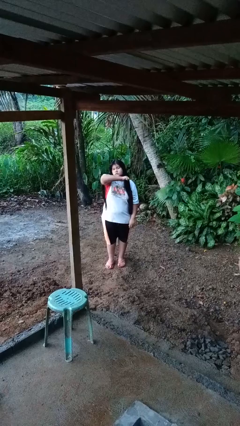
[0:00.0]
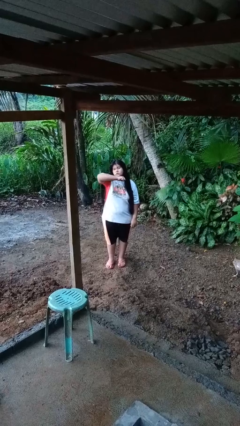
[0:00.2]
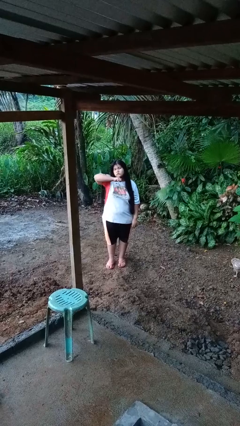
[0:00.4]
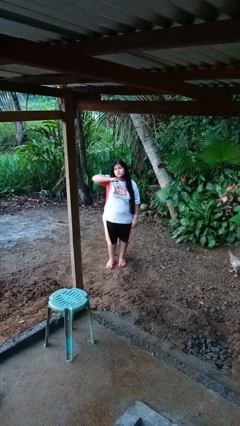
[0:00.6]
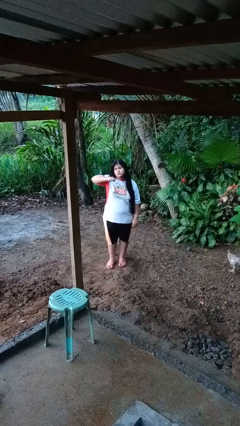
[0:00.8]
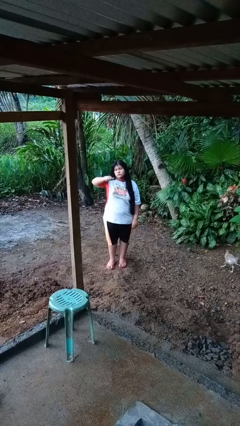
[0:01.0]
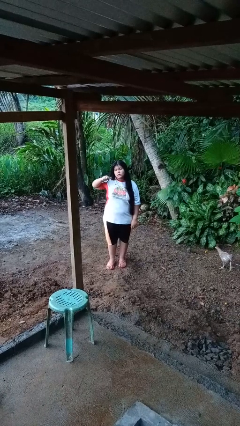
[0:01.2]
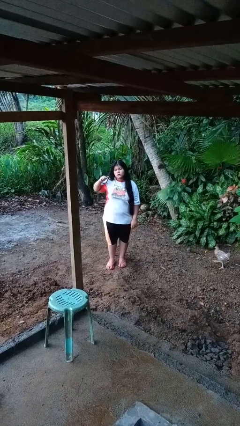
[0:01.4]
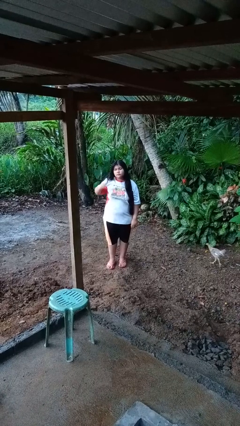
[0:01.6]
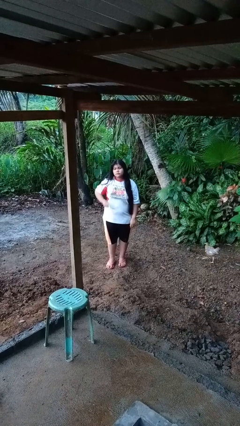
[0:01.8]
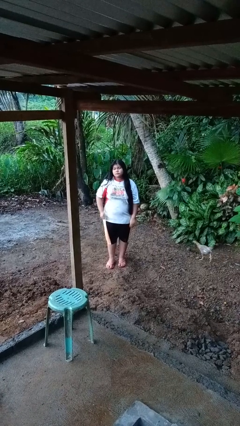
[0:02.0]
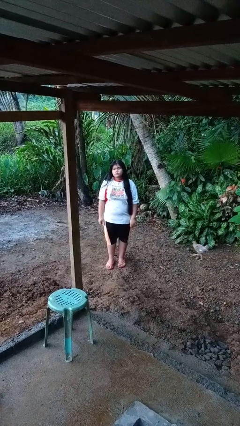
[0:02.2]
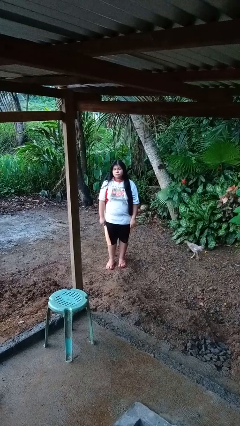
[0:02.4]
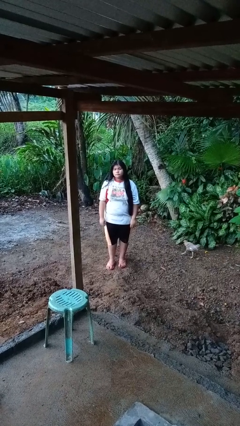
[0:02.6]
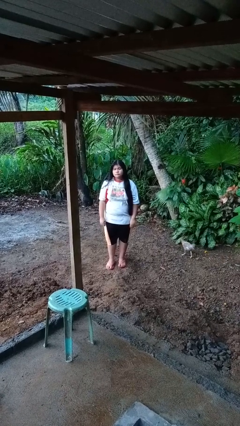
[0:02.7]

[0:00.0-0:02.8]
person gestures cut

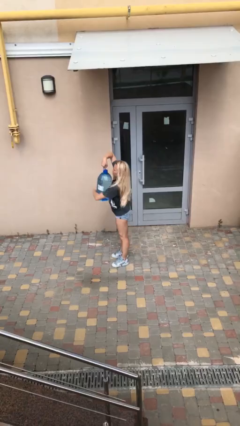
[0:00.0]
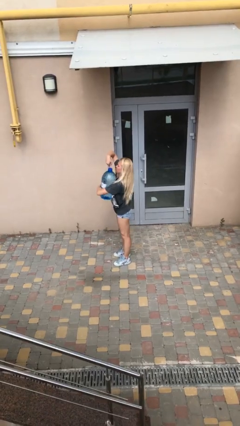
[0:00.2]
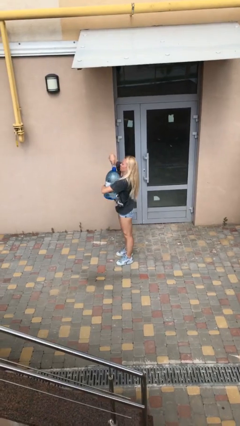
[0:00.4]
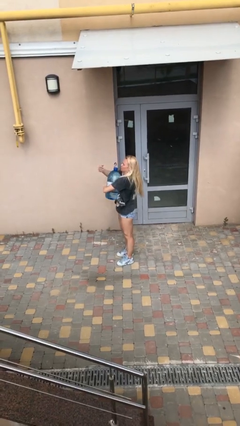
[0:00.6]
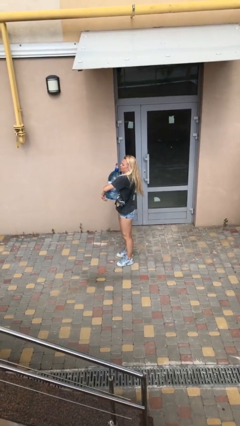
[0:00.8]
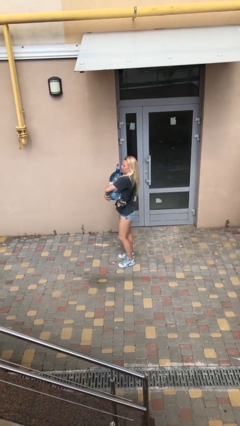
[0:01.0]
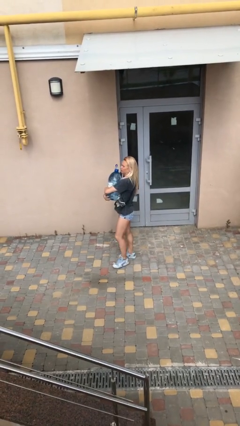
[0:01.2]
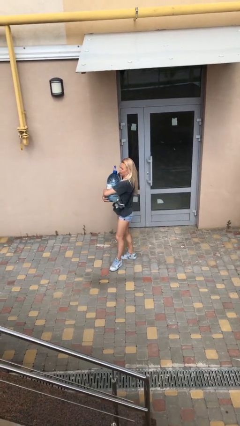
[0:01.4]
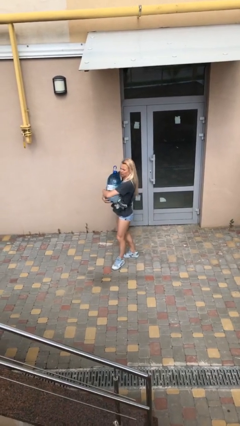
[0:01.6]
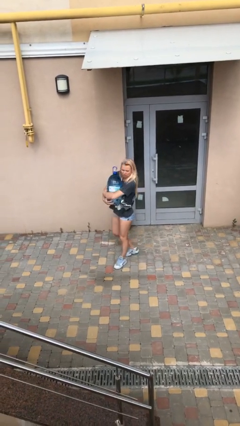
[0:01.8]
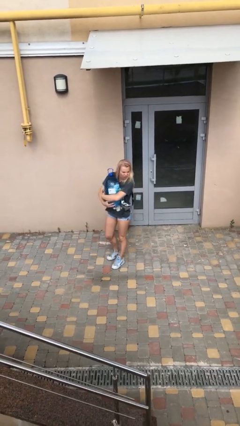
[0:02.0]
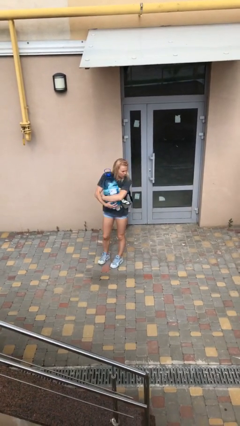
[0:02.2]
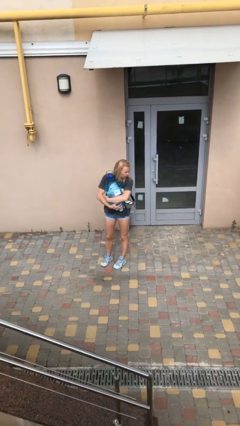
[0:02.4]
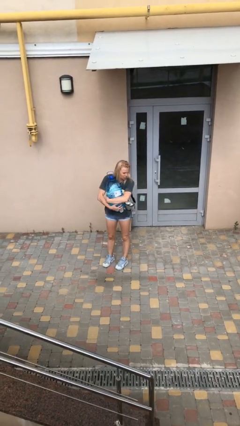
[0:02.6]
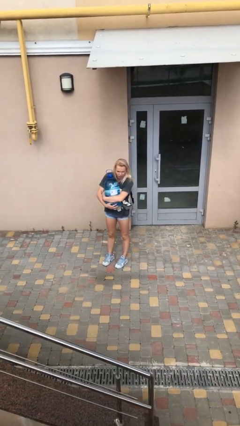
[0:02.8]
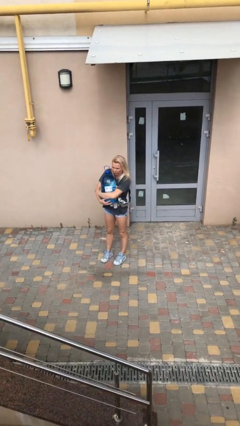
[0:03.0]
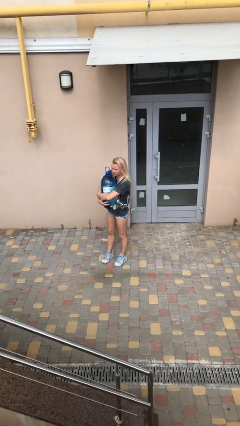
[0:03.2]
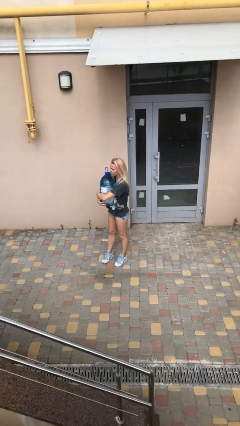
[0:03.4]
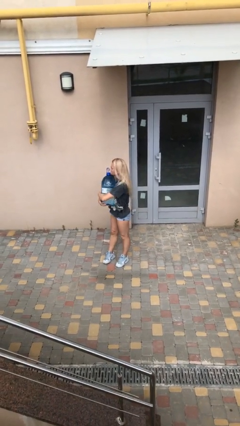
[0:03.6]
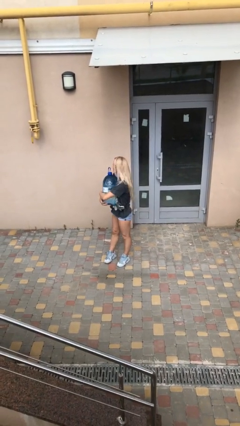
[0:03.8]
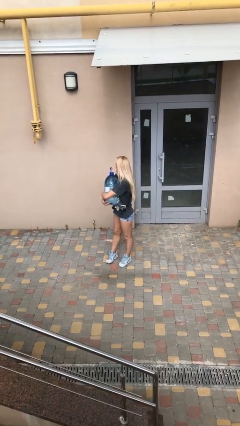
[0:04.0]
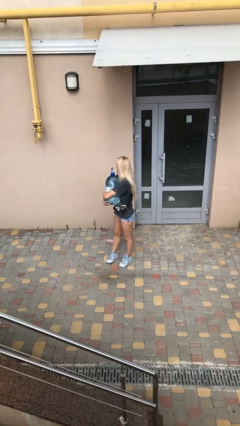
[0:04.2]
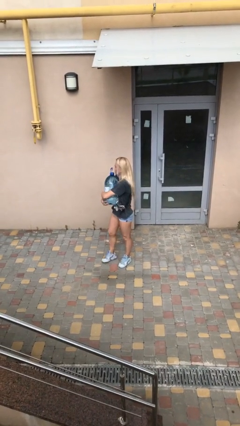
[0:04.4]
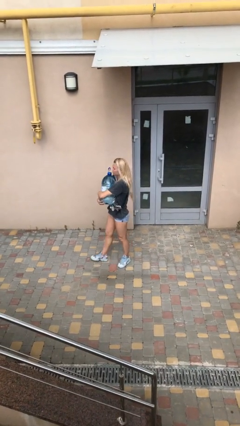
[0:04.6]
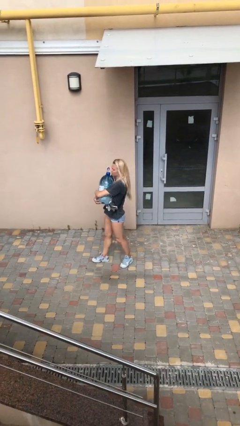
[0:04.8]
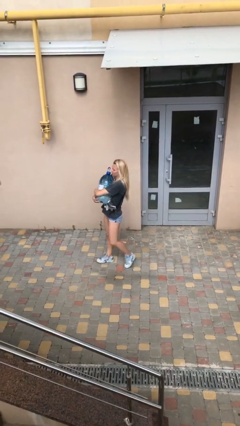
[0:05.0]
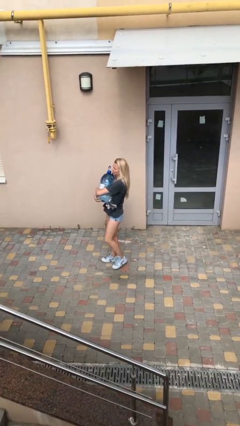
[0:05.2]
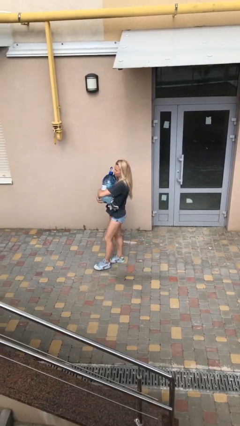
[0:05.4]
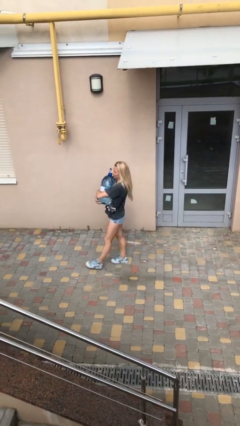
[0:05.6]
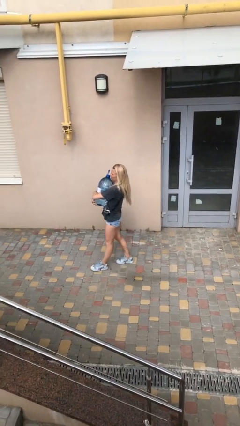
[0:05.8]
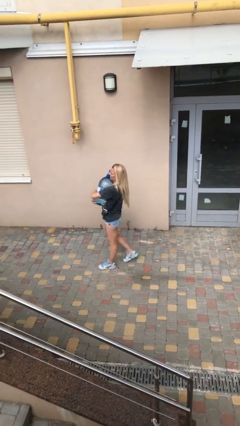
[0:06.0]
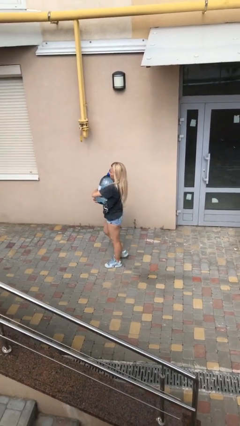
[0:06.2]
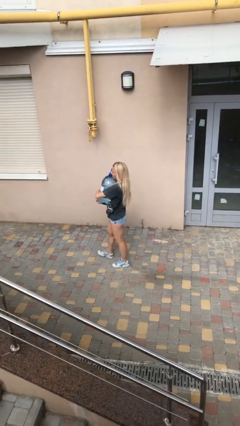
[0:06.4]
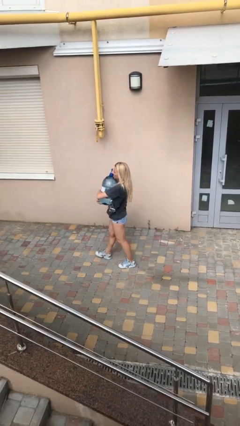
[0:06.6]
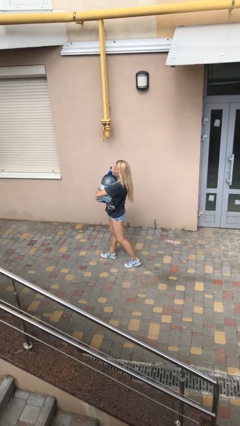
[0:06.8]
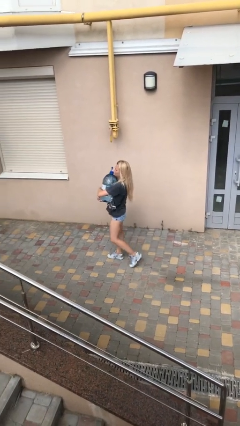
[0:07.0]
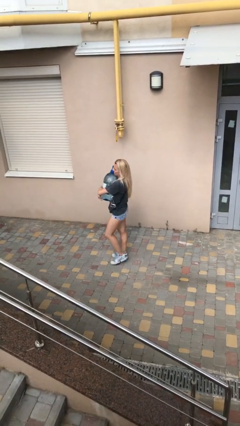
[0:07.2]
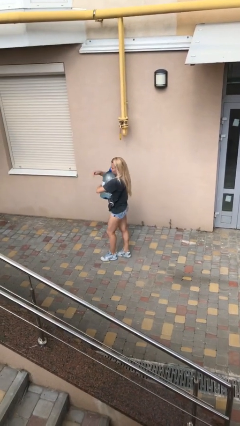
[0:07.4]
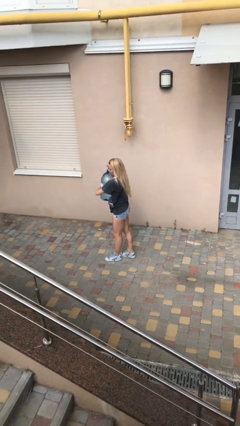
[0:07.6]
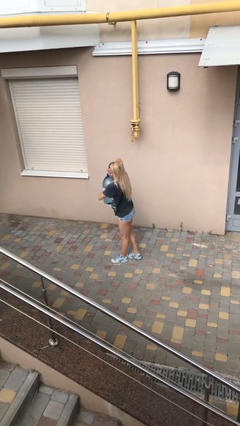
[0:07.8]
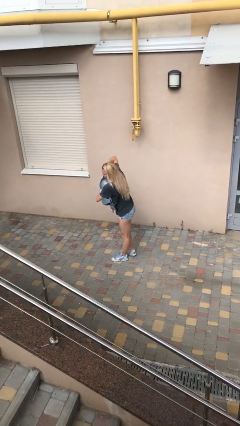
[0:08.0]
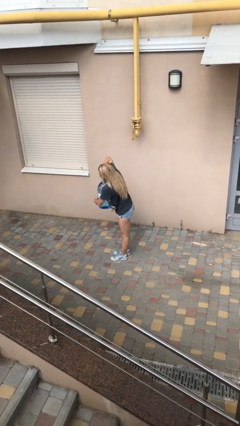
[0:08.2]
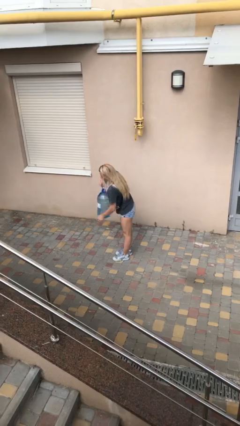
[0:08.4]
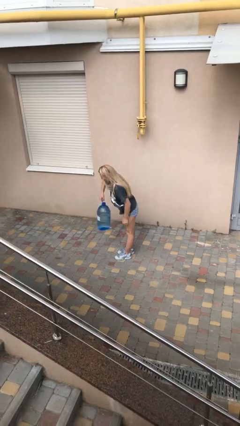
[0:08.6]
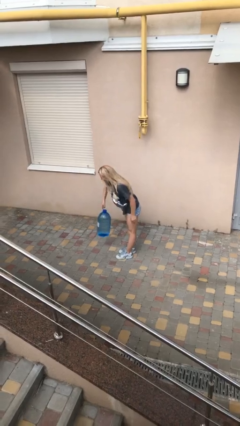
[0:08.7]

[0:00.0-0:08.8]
person carries heavy object

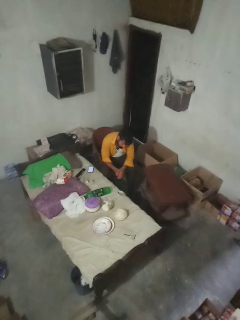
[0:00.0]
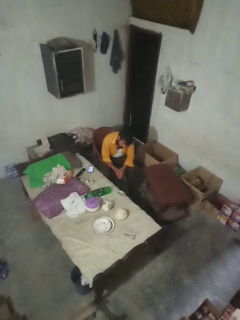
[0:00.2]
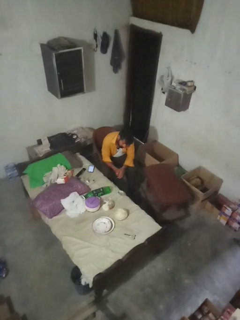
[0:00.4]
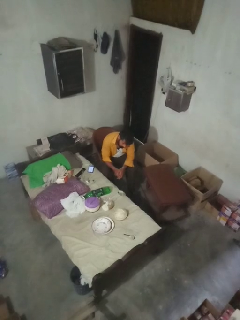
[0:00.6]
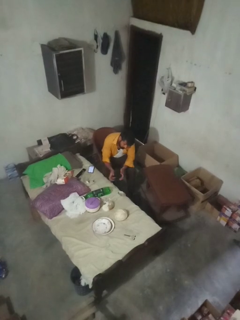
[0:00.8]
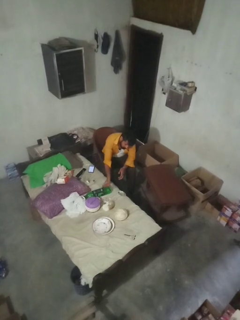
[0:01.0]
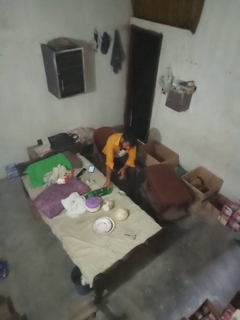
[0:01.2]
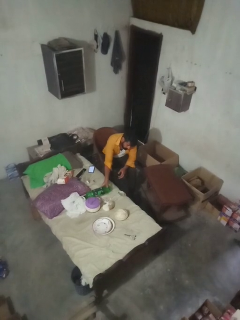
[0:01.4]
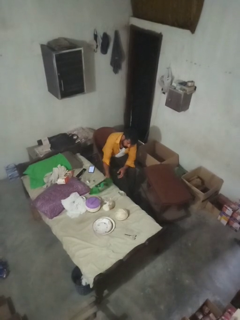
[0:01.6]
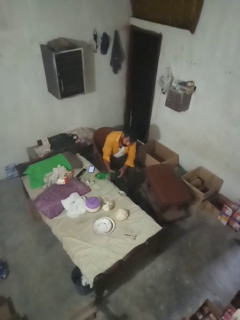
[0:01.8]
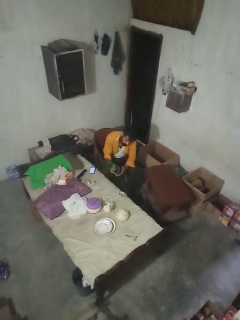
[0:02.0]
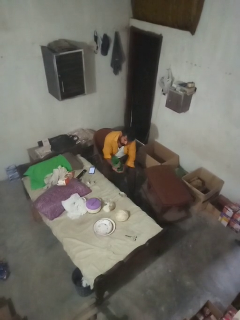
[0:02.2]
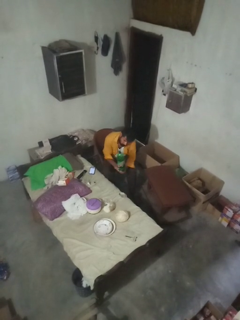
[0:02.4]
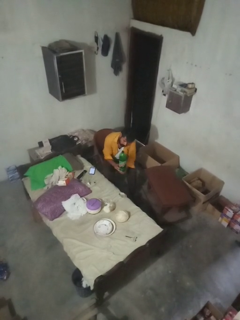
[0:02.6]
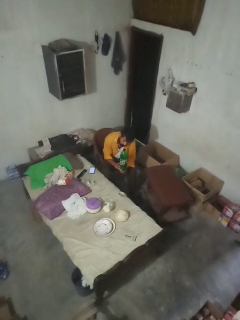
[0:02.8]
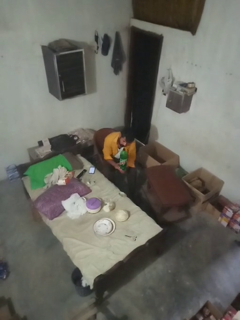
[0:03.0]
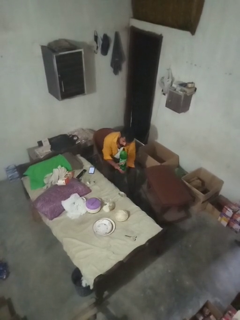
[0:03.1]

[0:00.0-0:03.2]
person picks up object from bed

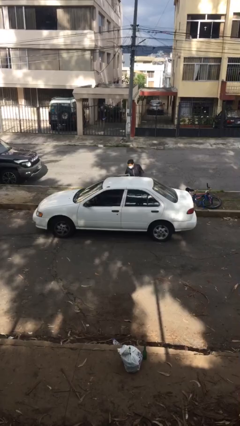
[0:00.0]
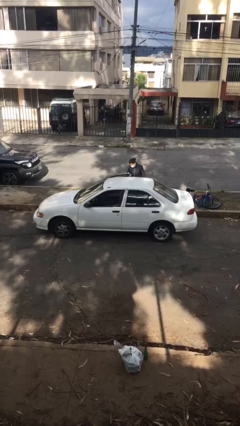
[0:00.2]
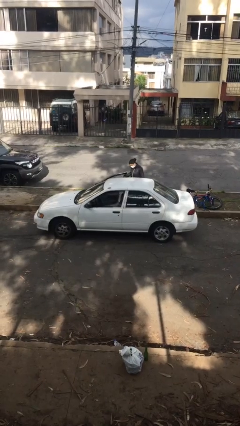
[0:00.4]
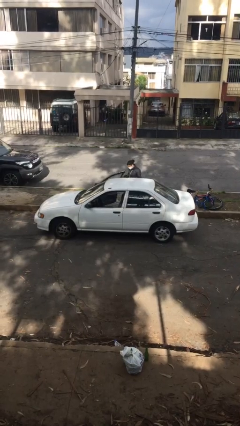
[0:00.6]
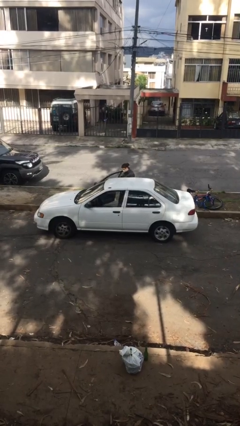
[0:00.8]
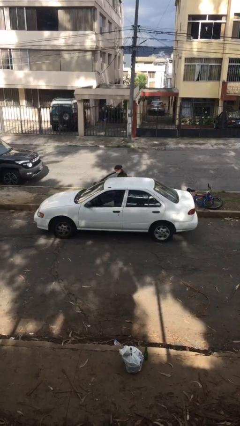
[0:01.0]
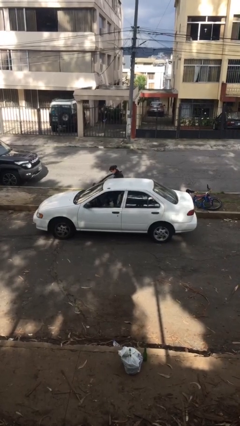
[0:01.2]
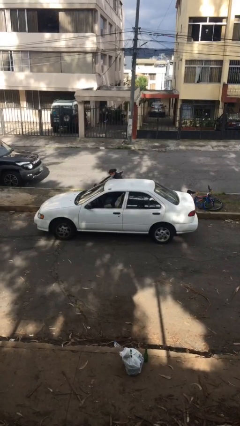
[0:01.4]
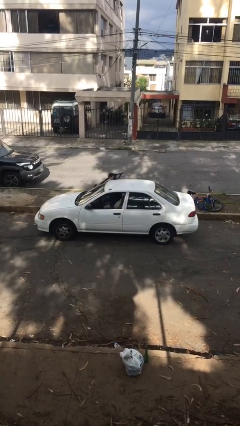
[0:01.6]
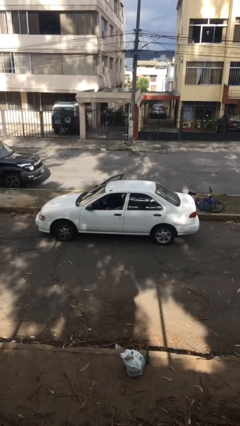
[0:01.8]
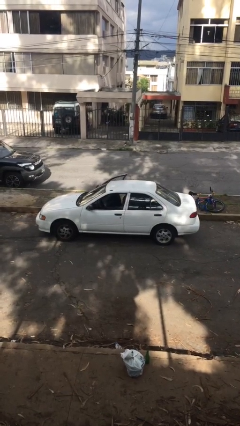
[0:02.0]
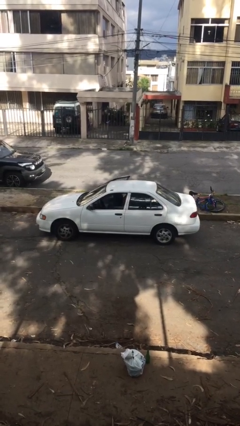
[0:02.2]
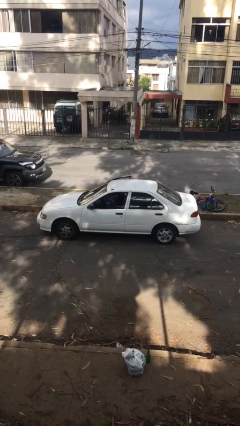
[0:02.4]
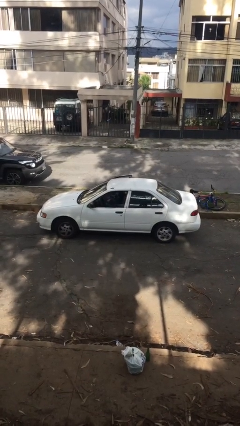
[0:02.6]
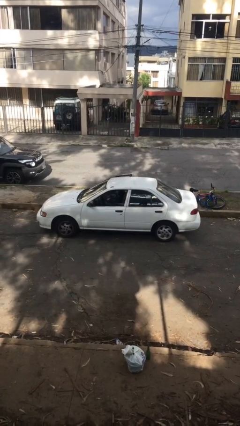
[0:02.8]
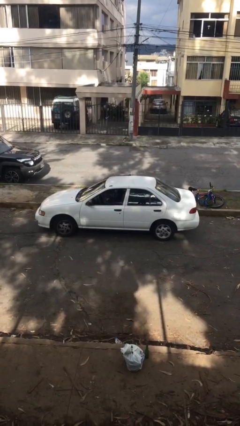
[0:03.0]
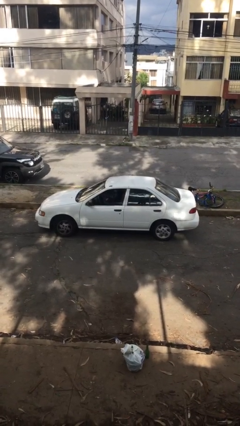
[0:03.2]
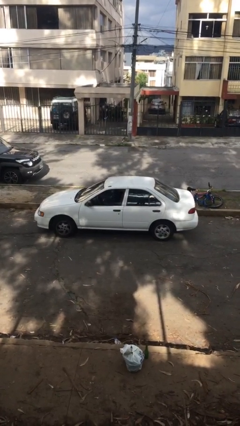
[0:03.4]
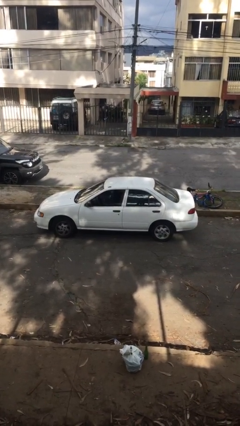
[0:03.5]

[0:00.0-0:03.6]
car picks up person

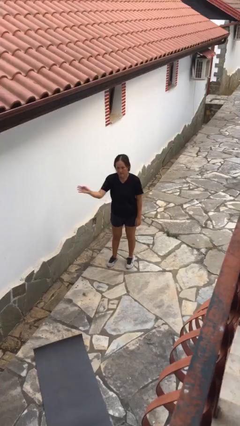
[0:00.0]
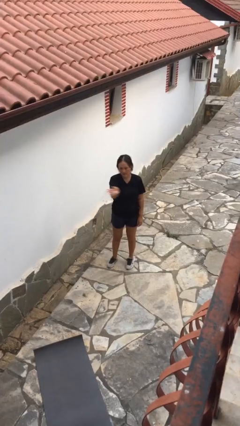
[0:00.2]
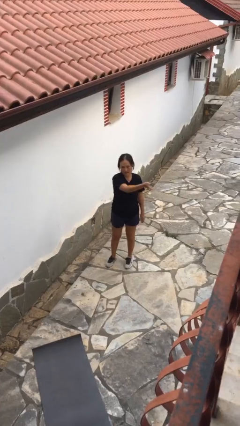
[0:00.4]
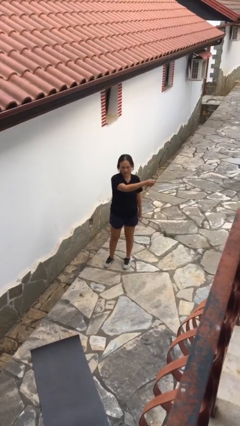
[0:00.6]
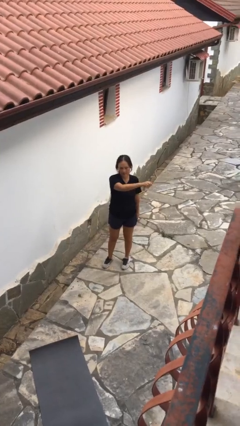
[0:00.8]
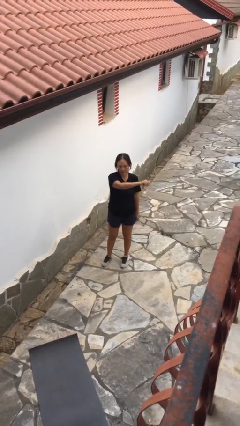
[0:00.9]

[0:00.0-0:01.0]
person gestures swipe left
